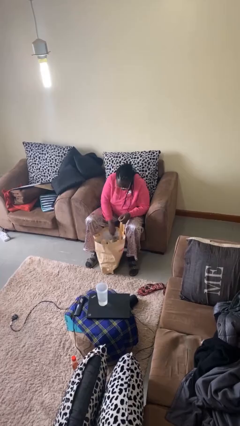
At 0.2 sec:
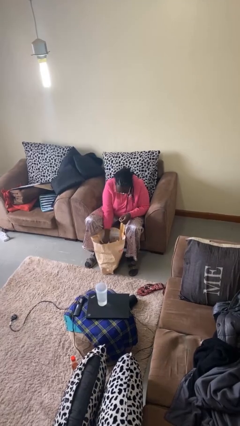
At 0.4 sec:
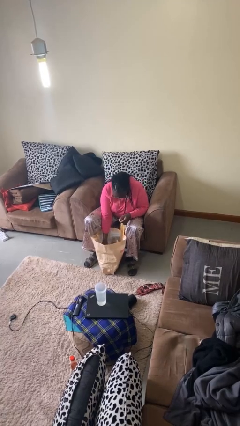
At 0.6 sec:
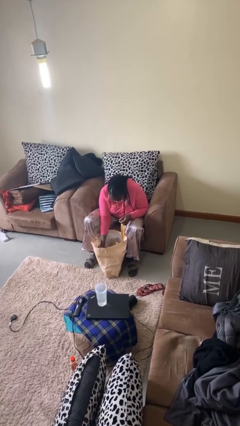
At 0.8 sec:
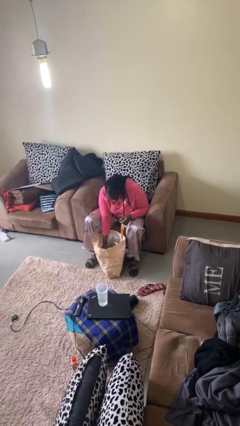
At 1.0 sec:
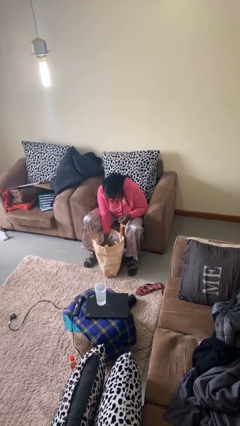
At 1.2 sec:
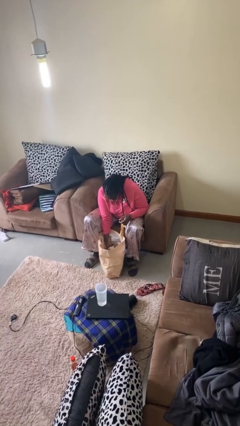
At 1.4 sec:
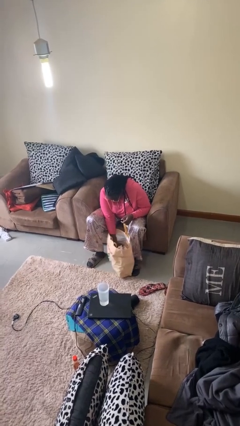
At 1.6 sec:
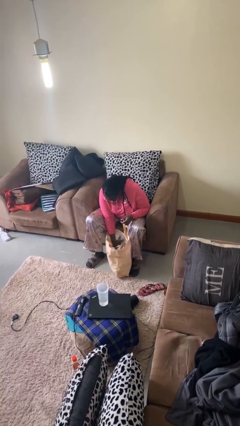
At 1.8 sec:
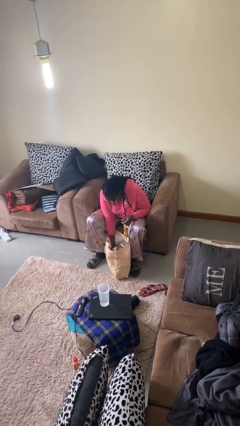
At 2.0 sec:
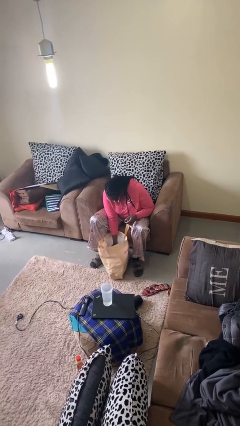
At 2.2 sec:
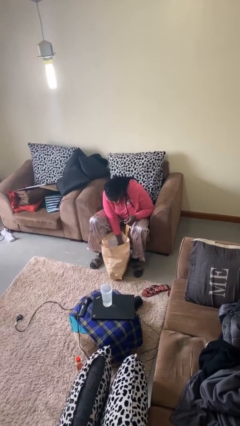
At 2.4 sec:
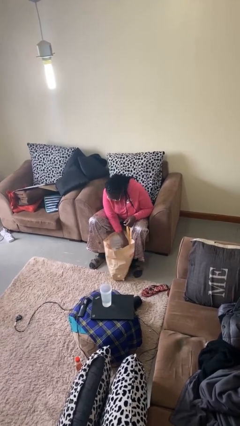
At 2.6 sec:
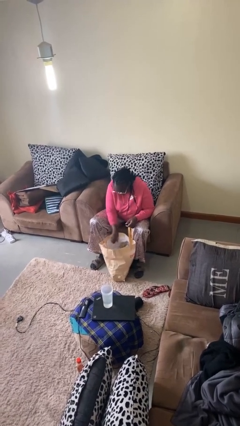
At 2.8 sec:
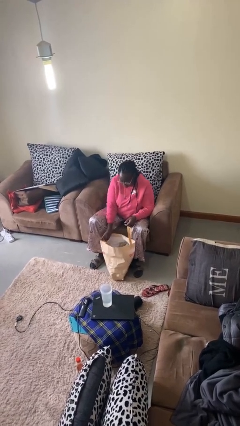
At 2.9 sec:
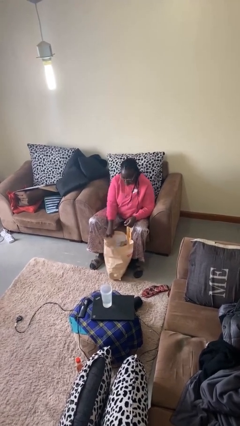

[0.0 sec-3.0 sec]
person searches in bag

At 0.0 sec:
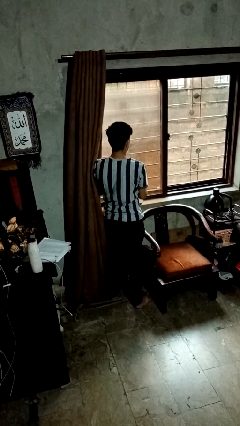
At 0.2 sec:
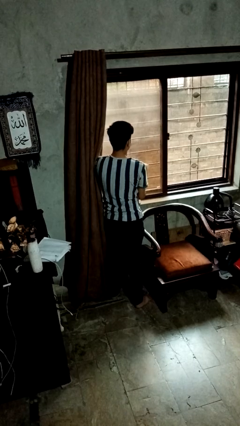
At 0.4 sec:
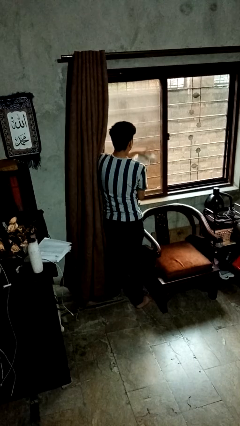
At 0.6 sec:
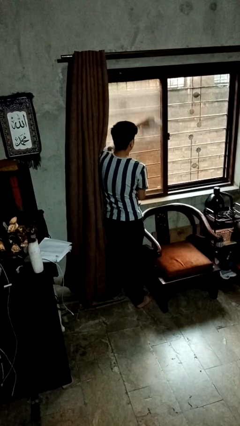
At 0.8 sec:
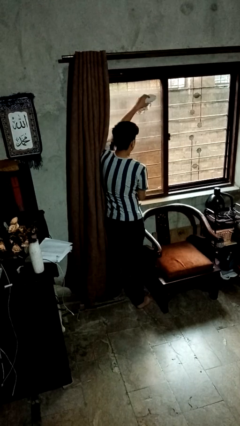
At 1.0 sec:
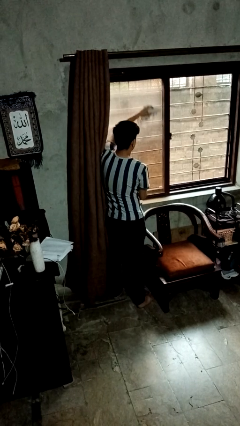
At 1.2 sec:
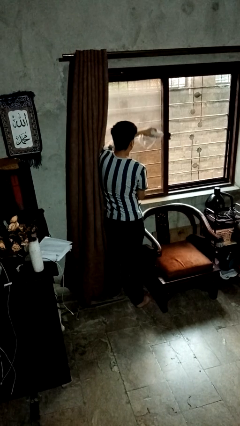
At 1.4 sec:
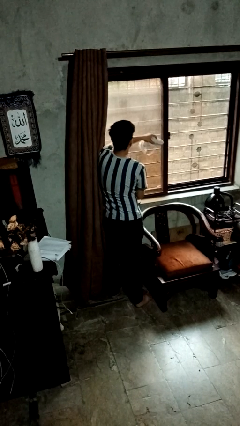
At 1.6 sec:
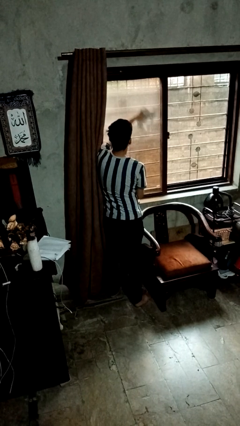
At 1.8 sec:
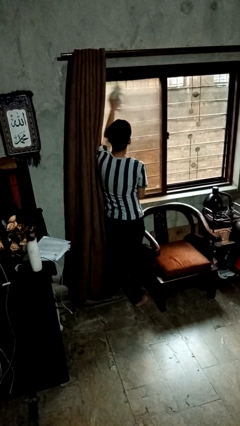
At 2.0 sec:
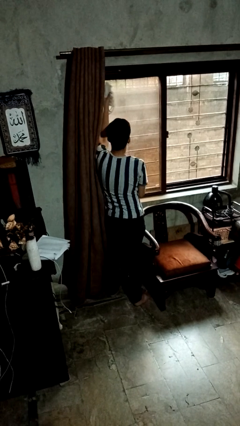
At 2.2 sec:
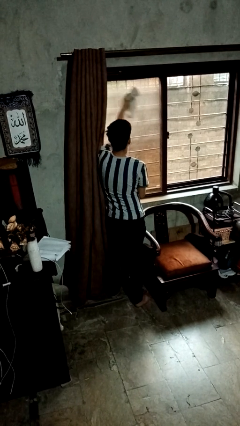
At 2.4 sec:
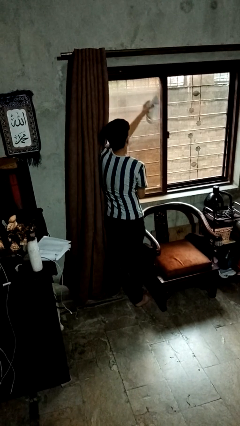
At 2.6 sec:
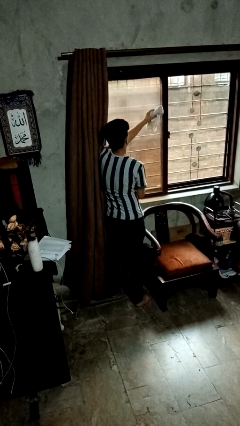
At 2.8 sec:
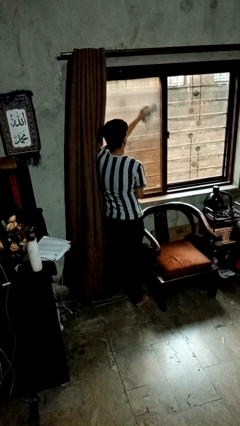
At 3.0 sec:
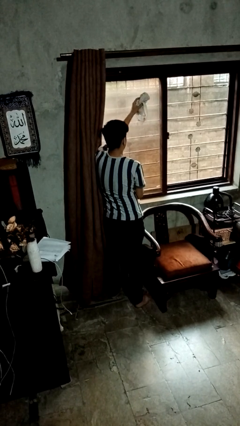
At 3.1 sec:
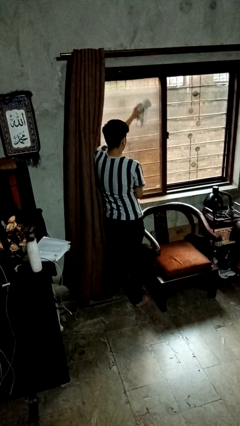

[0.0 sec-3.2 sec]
person washes window

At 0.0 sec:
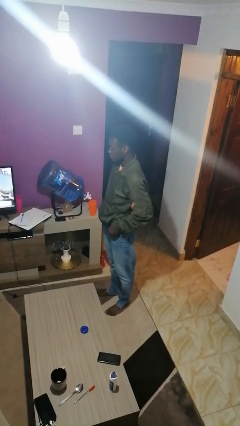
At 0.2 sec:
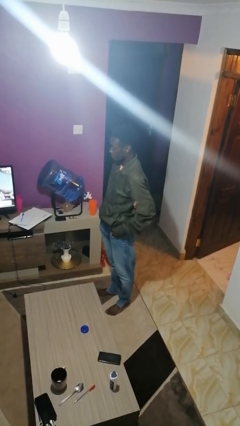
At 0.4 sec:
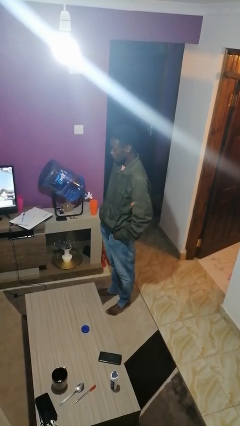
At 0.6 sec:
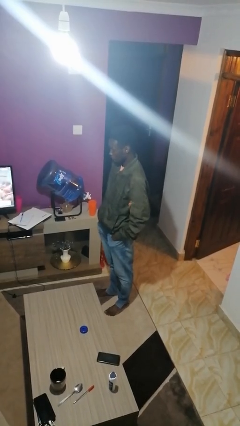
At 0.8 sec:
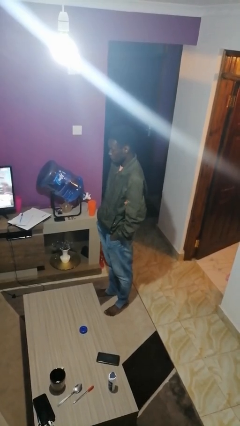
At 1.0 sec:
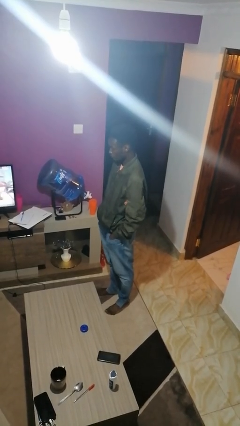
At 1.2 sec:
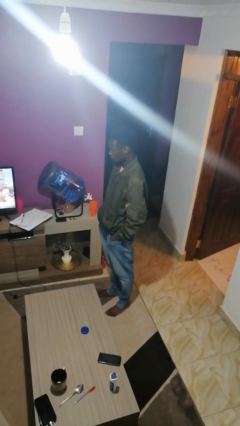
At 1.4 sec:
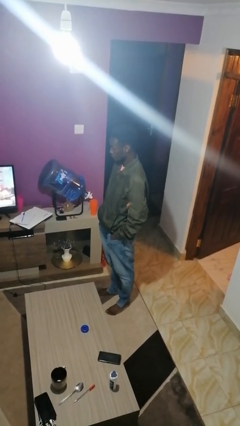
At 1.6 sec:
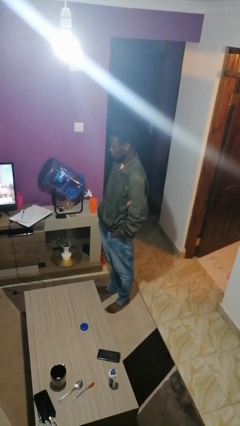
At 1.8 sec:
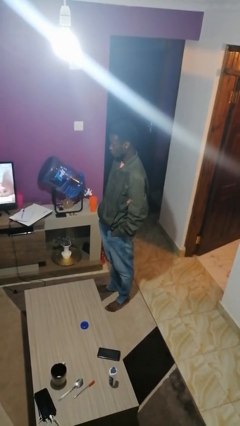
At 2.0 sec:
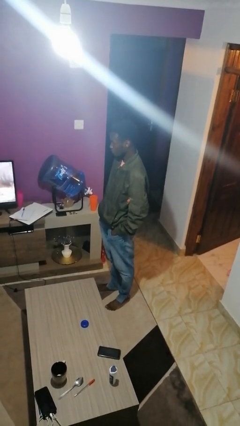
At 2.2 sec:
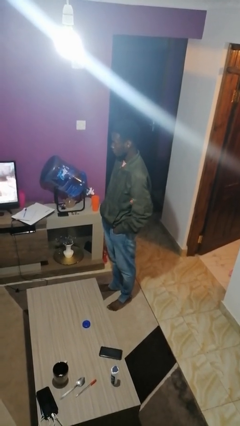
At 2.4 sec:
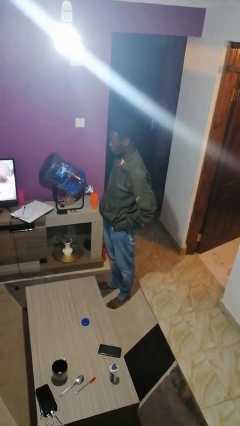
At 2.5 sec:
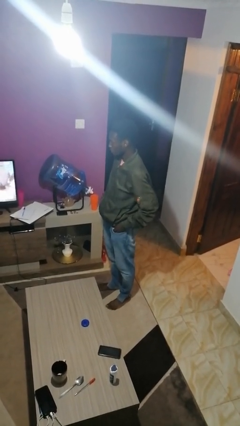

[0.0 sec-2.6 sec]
person puts hands in back pockets

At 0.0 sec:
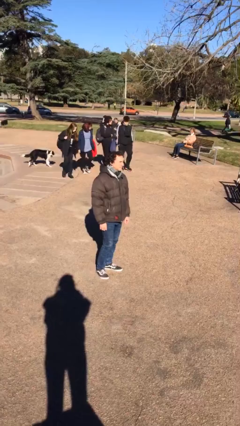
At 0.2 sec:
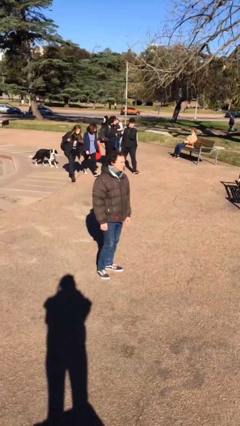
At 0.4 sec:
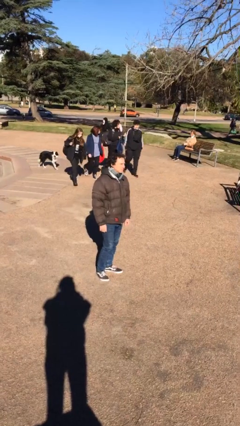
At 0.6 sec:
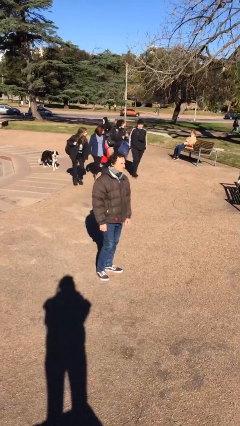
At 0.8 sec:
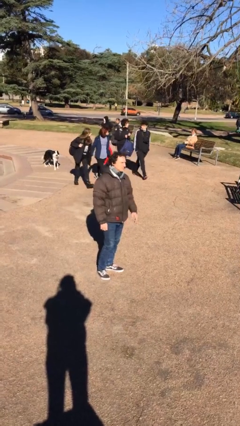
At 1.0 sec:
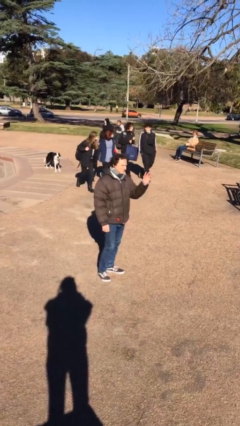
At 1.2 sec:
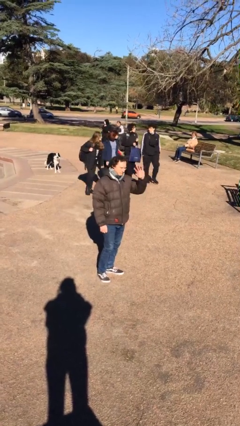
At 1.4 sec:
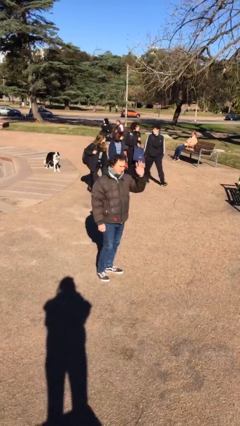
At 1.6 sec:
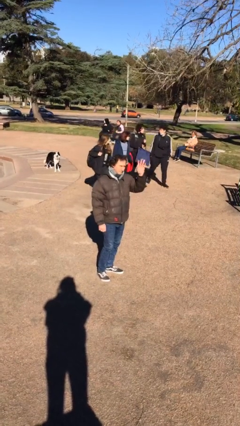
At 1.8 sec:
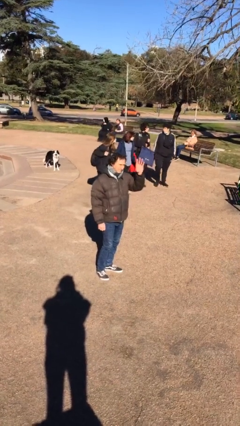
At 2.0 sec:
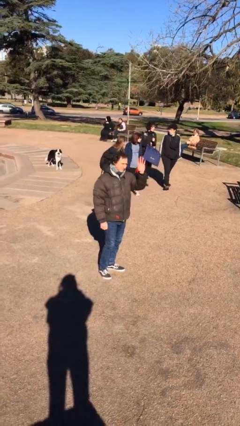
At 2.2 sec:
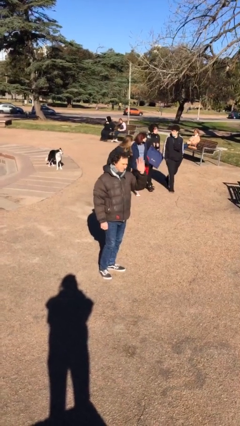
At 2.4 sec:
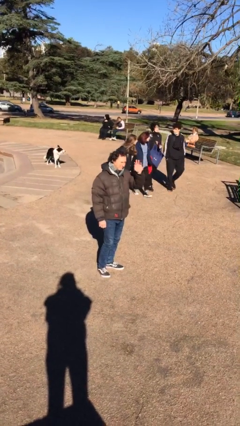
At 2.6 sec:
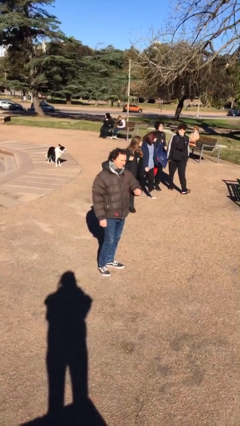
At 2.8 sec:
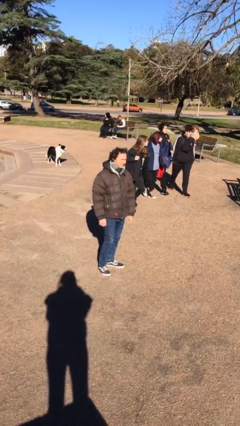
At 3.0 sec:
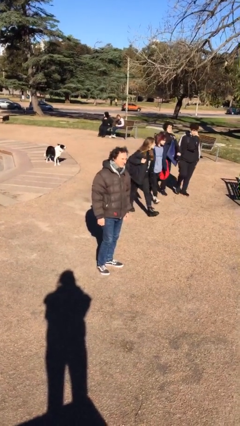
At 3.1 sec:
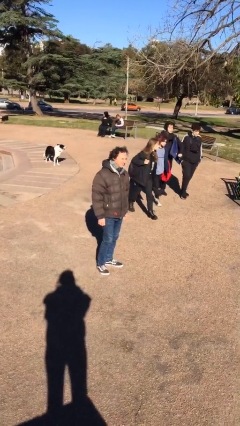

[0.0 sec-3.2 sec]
person waves at person

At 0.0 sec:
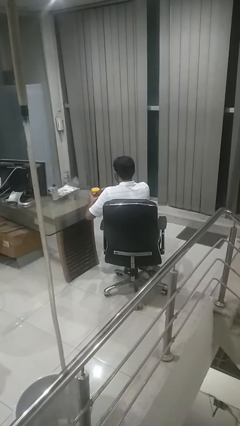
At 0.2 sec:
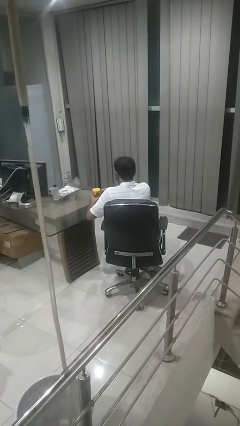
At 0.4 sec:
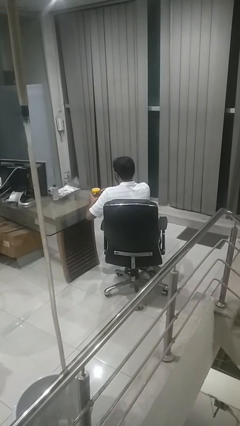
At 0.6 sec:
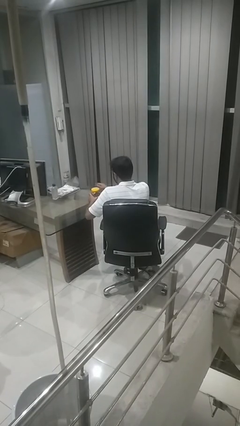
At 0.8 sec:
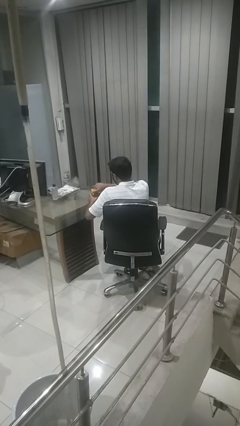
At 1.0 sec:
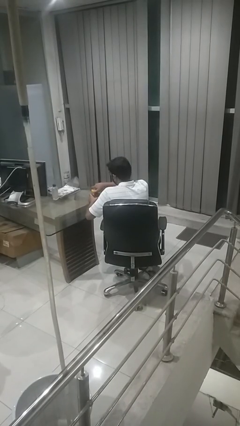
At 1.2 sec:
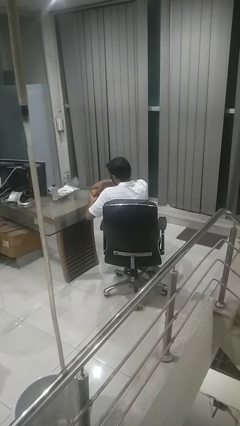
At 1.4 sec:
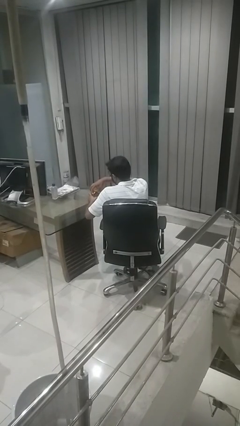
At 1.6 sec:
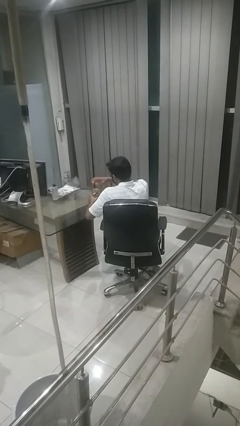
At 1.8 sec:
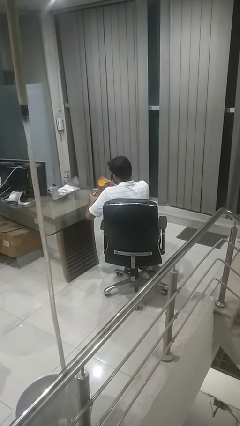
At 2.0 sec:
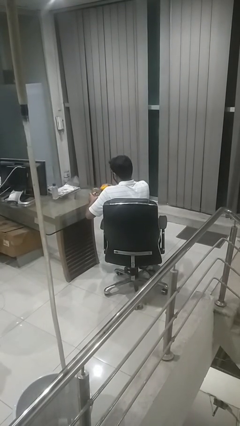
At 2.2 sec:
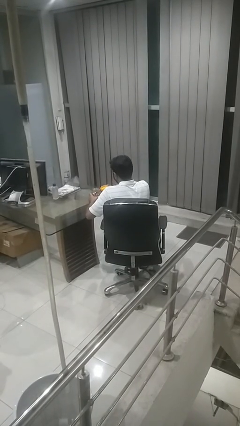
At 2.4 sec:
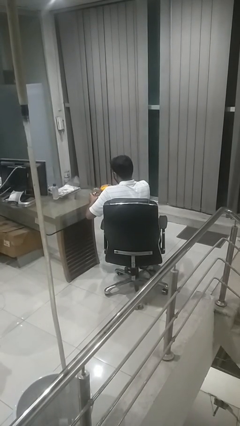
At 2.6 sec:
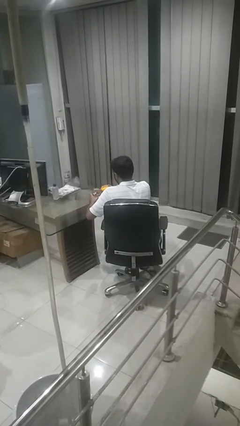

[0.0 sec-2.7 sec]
person opens jar

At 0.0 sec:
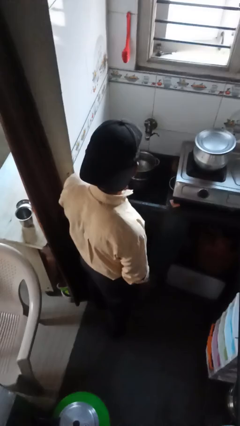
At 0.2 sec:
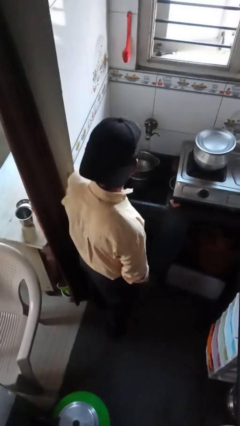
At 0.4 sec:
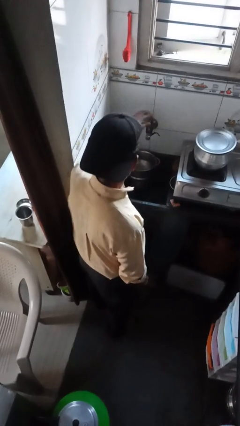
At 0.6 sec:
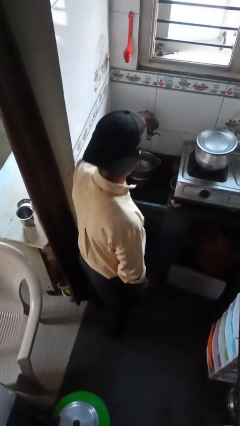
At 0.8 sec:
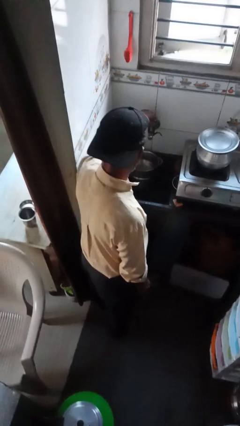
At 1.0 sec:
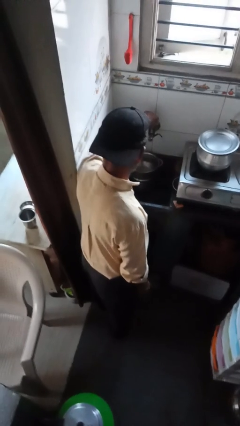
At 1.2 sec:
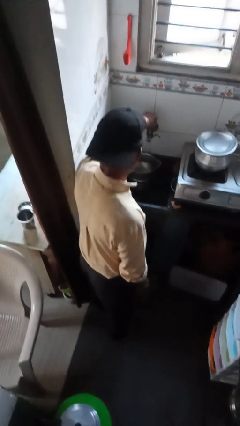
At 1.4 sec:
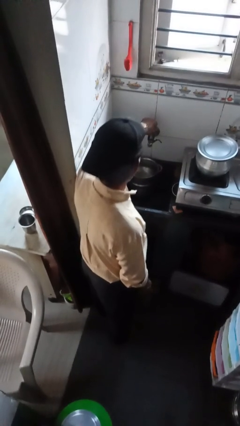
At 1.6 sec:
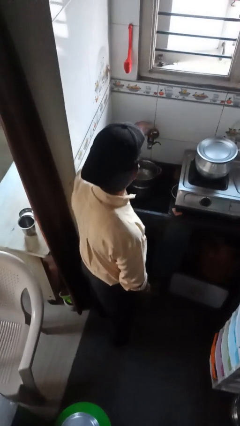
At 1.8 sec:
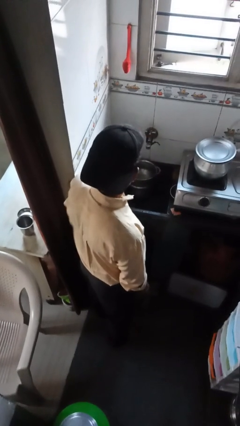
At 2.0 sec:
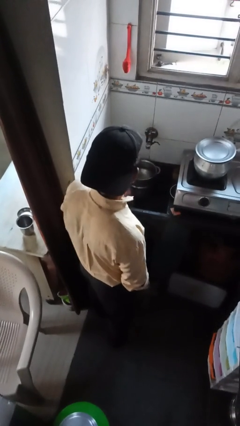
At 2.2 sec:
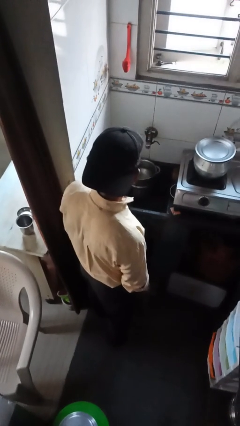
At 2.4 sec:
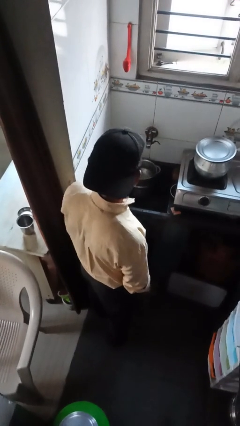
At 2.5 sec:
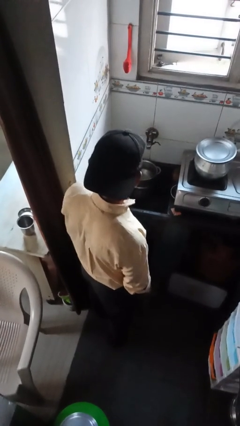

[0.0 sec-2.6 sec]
person turns on faucet
